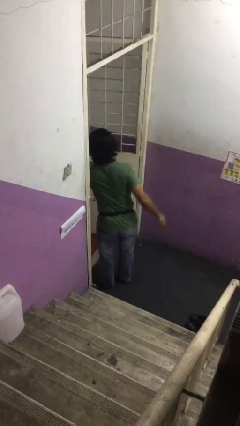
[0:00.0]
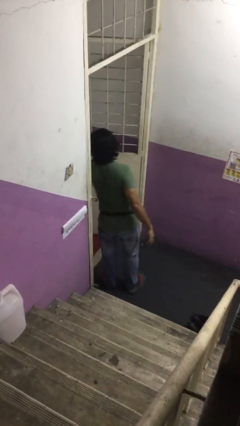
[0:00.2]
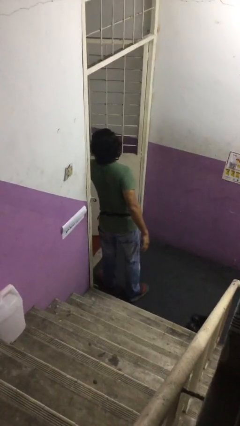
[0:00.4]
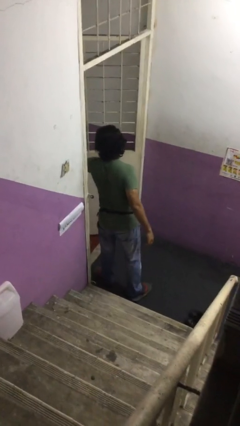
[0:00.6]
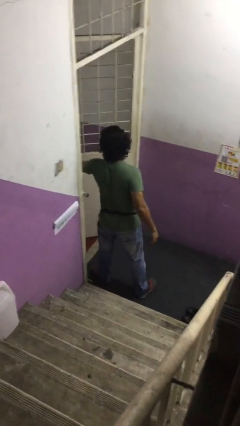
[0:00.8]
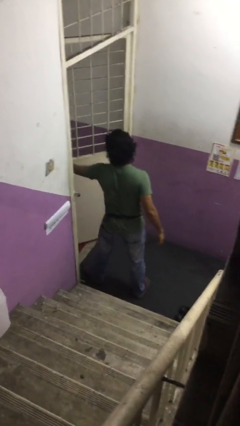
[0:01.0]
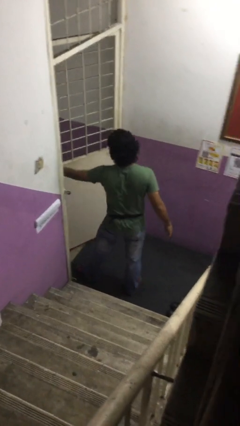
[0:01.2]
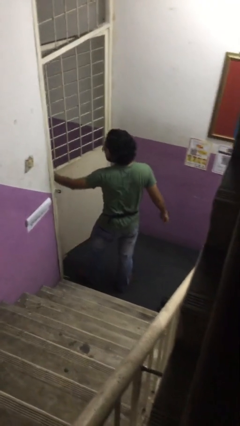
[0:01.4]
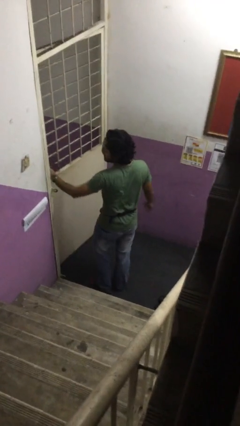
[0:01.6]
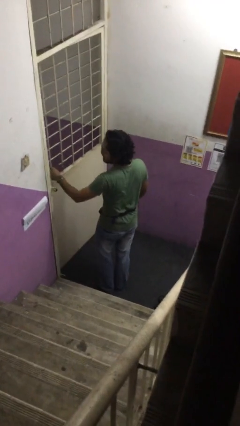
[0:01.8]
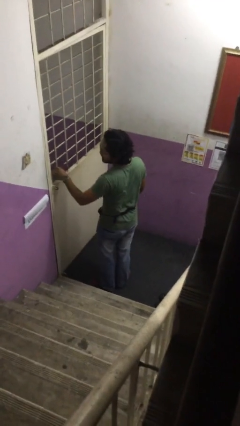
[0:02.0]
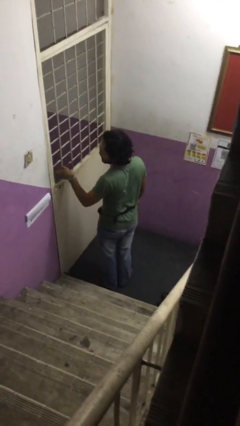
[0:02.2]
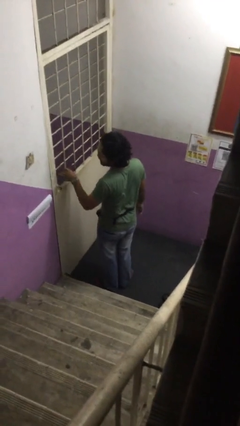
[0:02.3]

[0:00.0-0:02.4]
person closes facility door

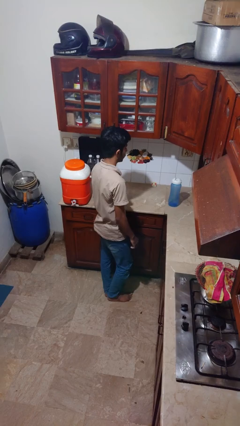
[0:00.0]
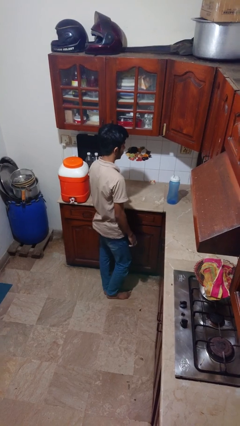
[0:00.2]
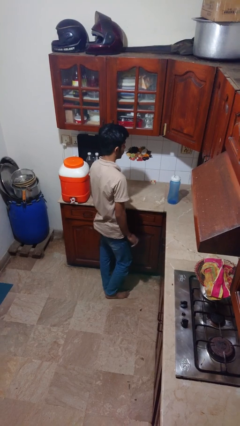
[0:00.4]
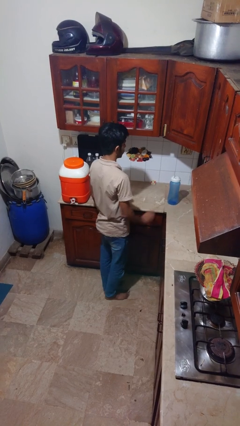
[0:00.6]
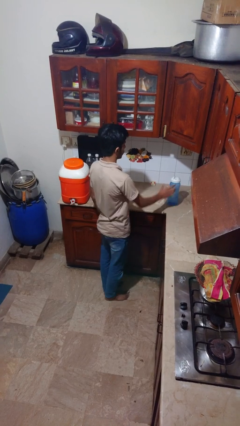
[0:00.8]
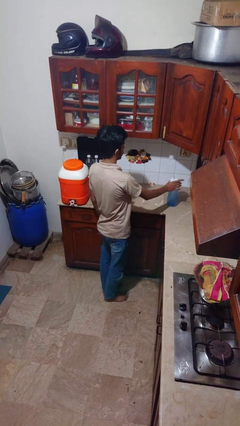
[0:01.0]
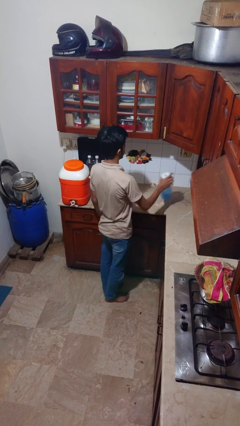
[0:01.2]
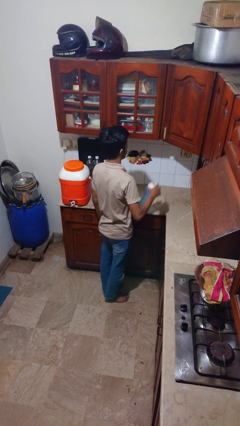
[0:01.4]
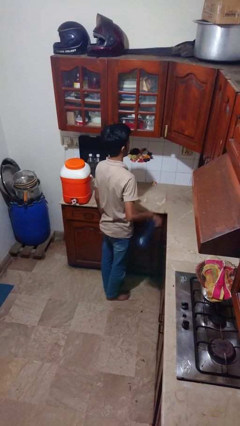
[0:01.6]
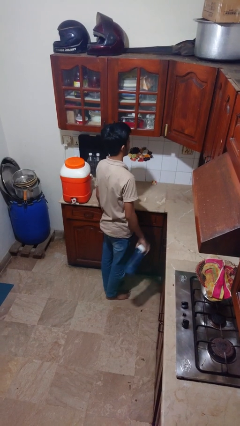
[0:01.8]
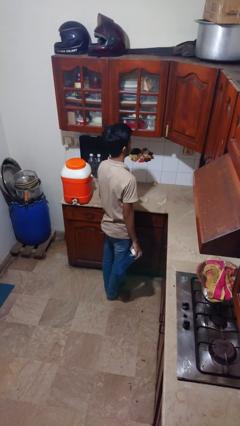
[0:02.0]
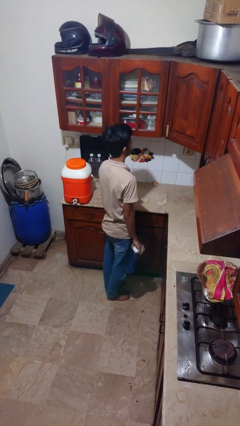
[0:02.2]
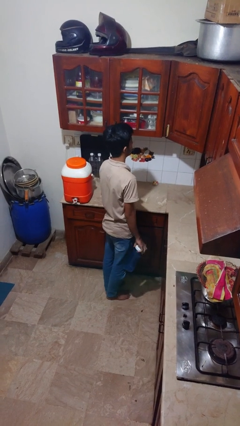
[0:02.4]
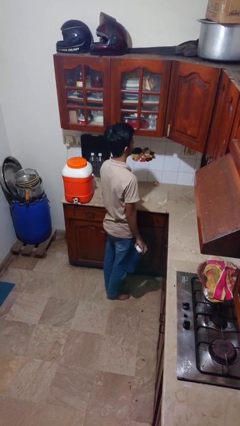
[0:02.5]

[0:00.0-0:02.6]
person picks up object from countertop

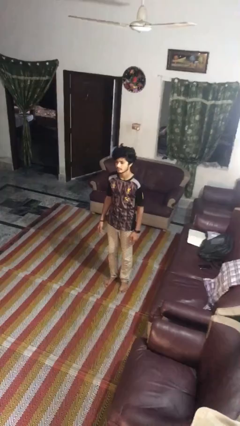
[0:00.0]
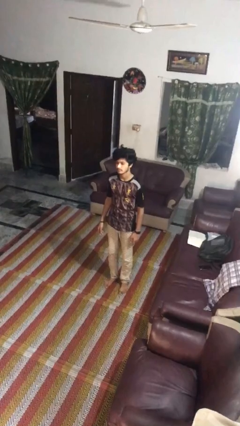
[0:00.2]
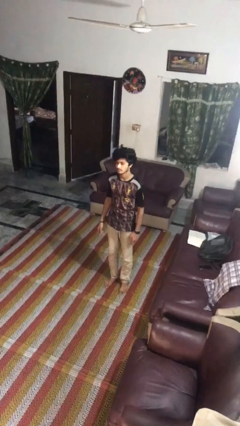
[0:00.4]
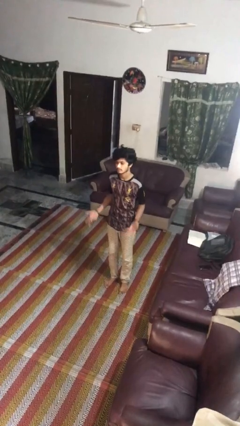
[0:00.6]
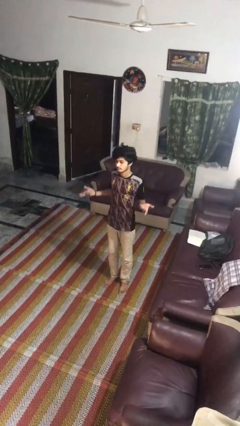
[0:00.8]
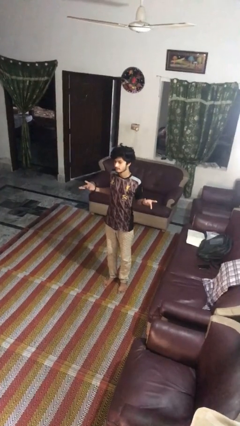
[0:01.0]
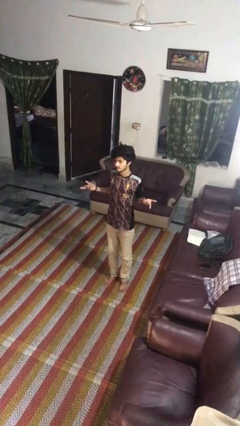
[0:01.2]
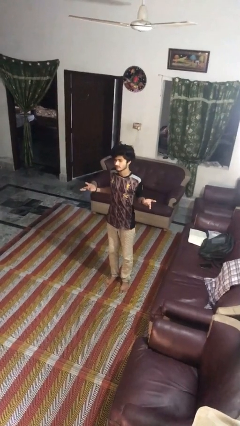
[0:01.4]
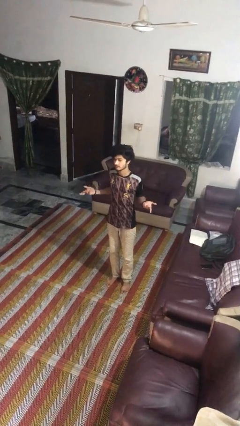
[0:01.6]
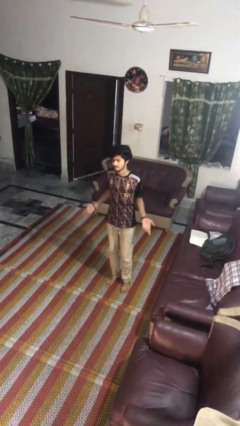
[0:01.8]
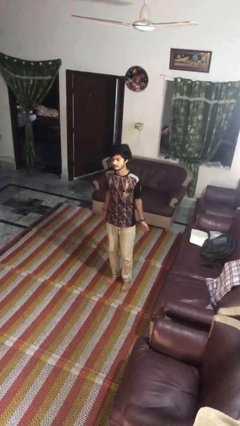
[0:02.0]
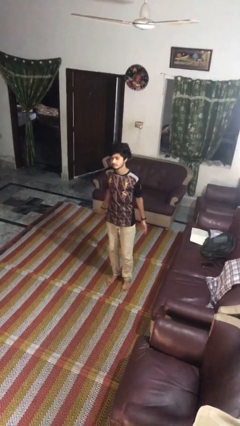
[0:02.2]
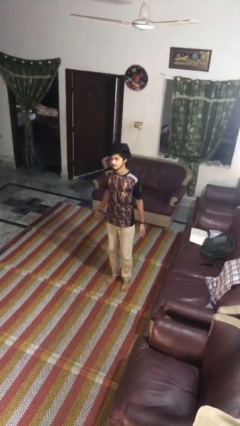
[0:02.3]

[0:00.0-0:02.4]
person shrugs

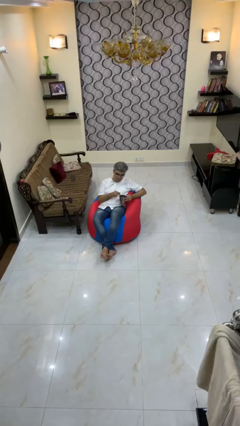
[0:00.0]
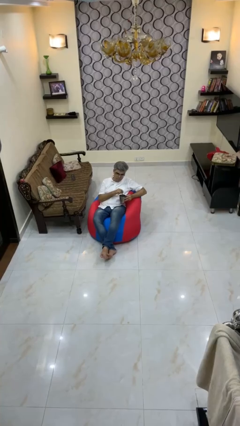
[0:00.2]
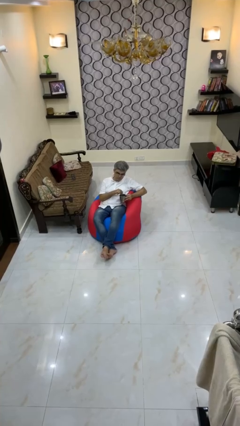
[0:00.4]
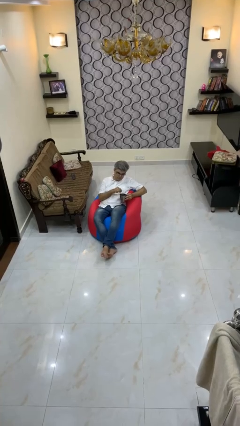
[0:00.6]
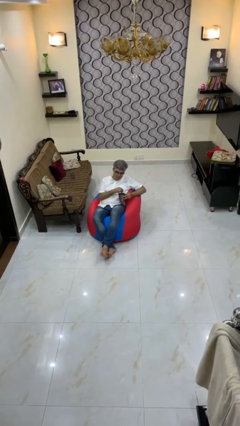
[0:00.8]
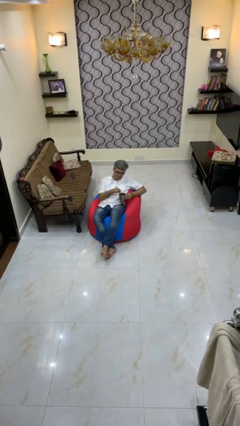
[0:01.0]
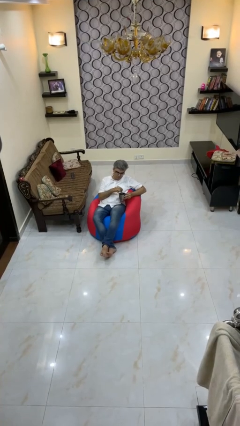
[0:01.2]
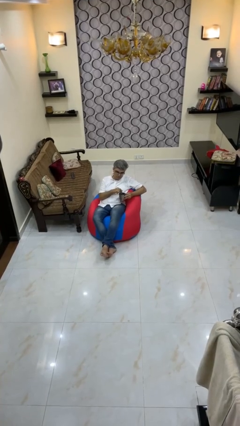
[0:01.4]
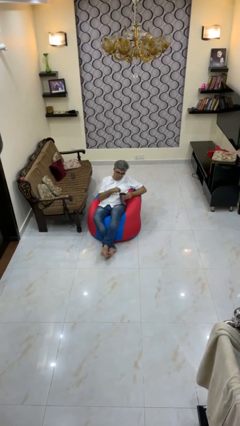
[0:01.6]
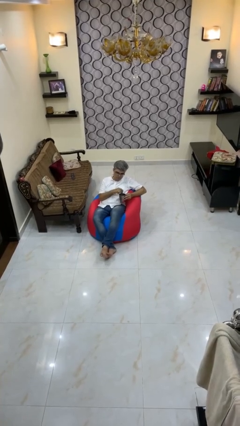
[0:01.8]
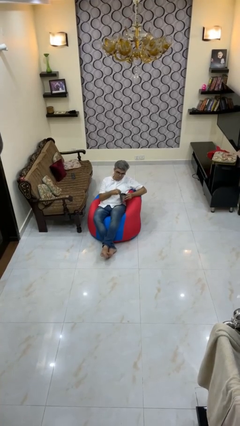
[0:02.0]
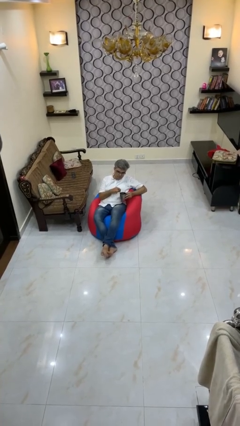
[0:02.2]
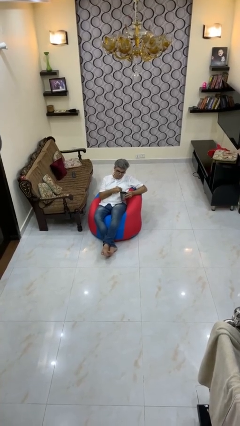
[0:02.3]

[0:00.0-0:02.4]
person stirs mug

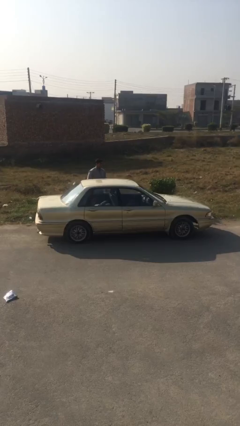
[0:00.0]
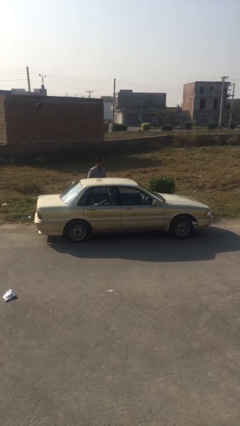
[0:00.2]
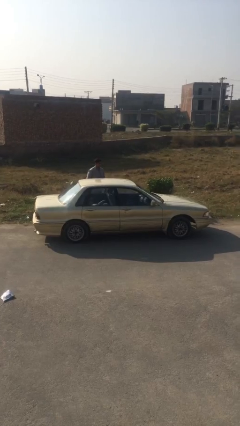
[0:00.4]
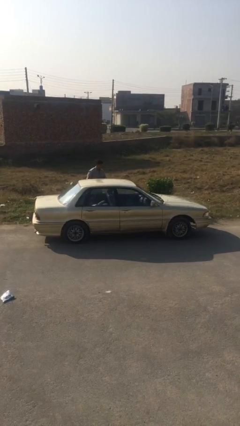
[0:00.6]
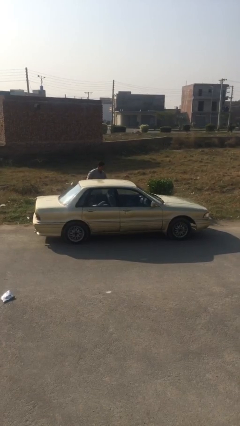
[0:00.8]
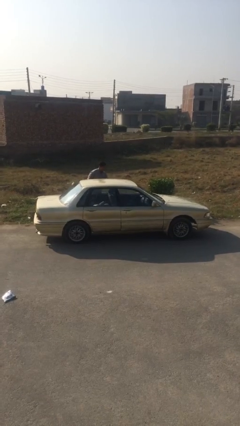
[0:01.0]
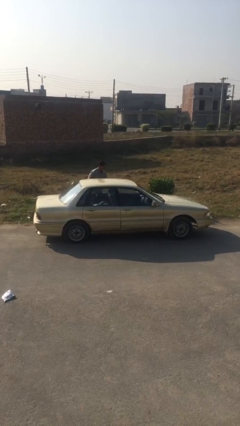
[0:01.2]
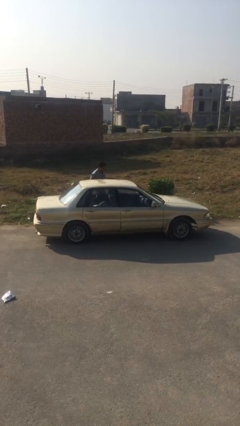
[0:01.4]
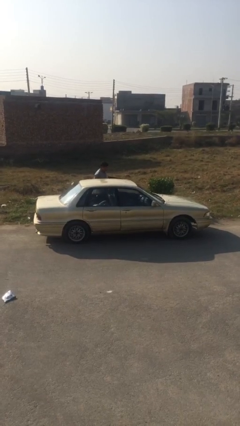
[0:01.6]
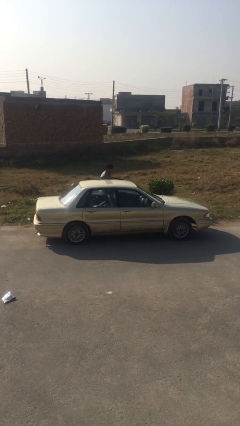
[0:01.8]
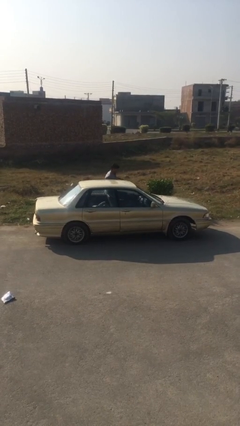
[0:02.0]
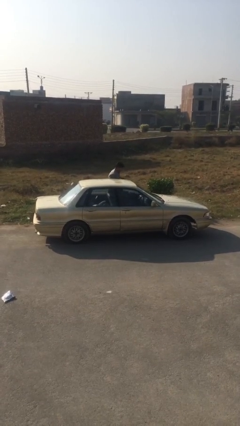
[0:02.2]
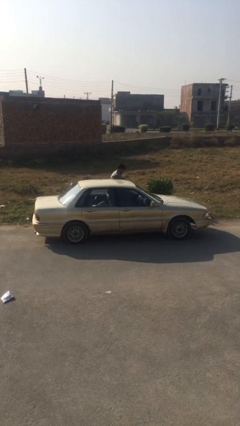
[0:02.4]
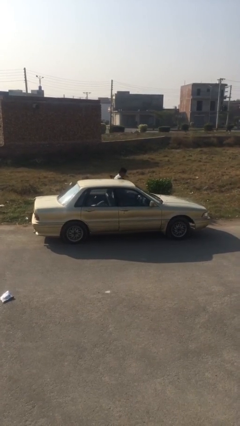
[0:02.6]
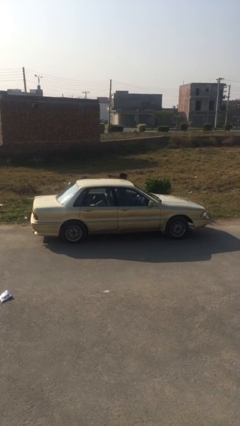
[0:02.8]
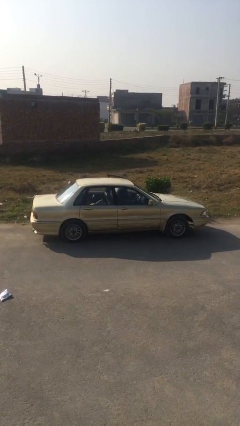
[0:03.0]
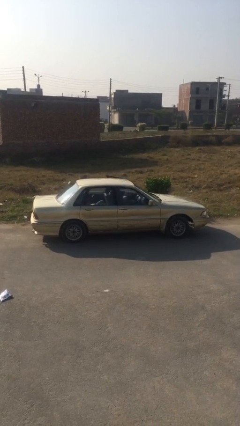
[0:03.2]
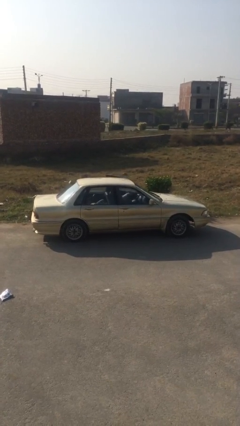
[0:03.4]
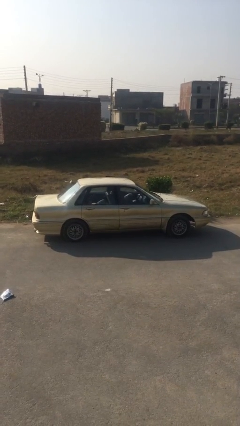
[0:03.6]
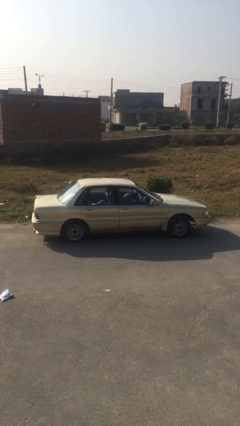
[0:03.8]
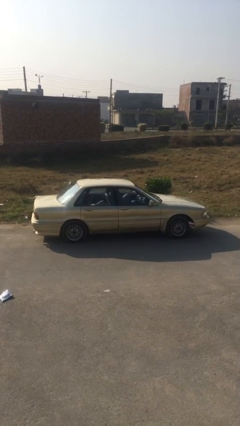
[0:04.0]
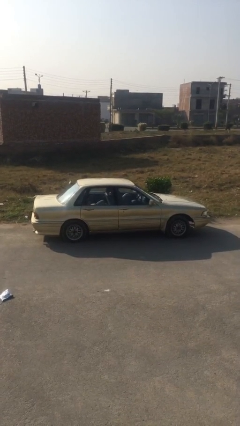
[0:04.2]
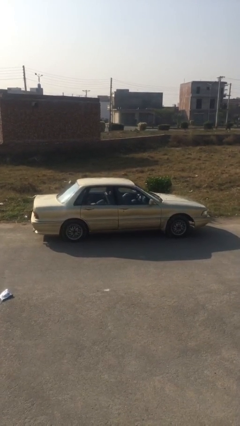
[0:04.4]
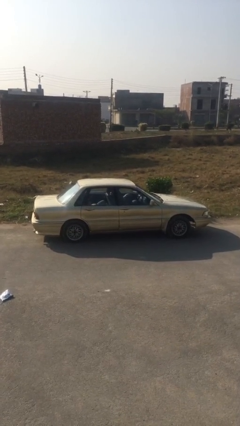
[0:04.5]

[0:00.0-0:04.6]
car picks up person

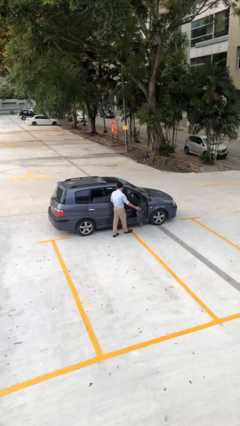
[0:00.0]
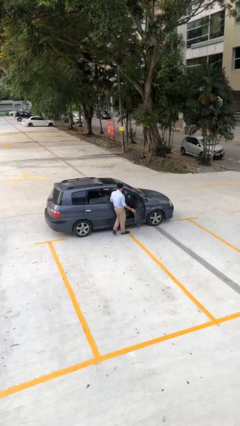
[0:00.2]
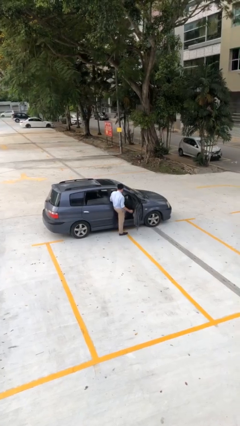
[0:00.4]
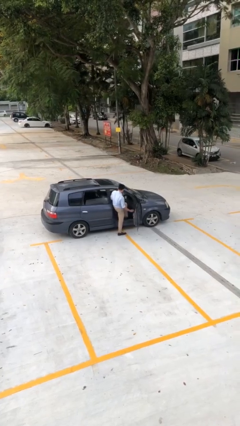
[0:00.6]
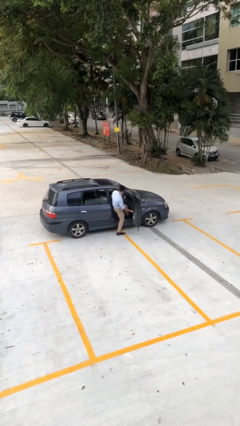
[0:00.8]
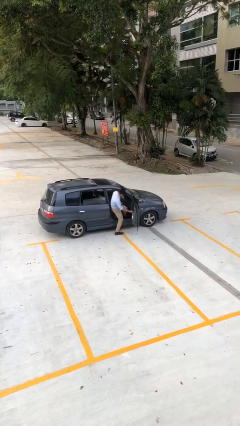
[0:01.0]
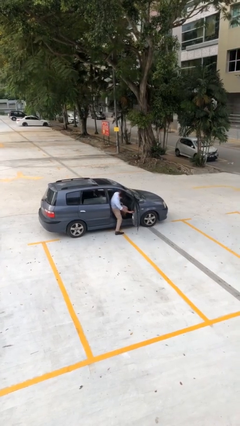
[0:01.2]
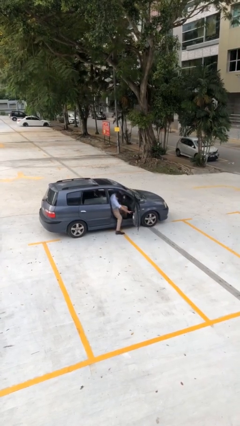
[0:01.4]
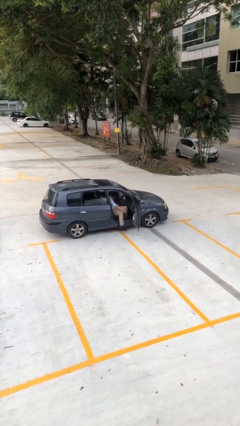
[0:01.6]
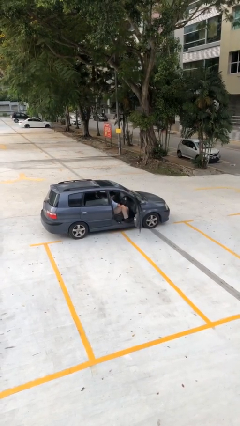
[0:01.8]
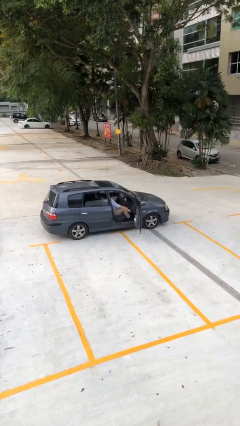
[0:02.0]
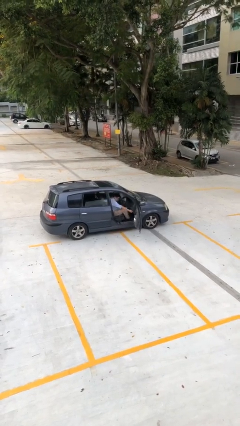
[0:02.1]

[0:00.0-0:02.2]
person enters car

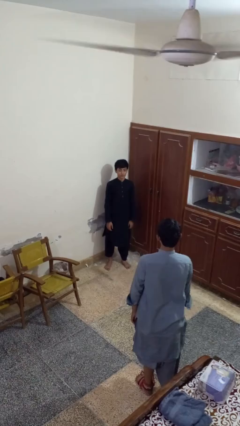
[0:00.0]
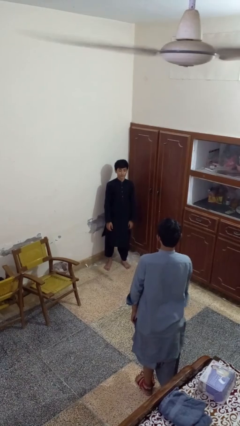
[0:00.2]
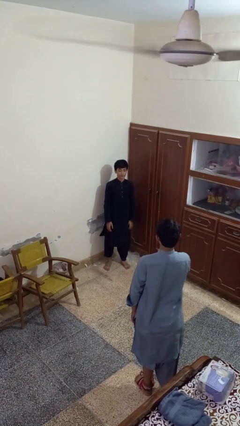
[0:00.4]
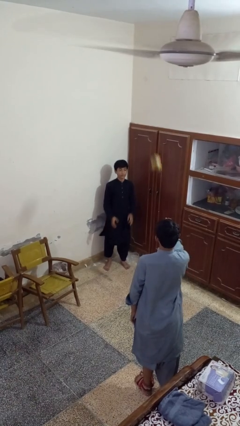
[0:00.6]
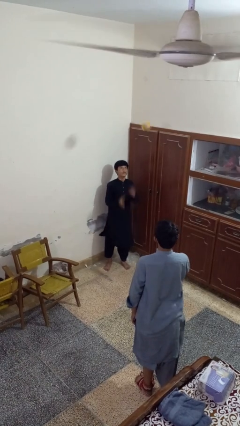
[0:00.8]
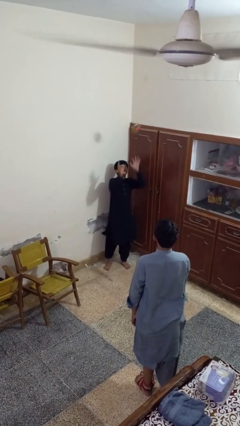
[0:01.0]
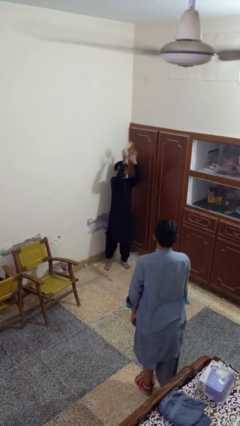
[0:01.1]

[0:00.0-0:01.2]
person catches object from person
